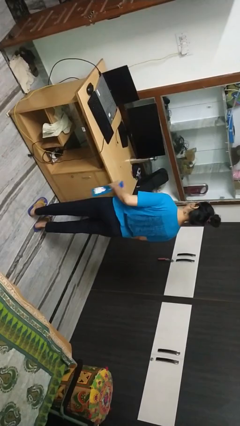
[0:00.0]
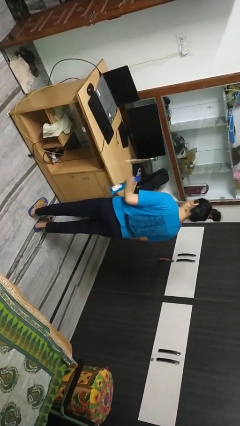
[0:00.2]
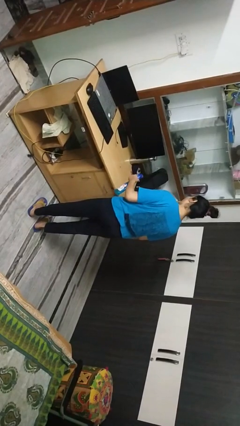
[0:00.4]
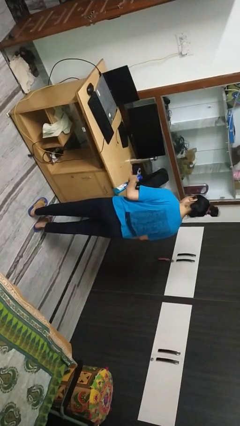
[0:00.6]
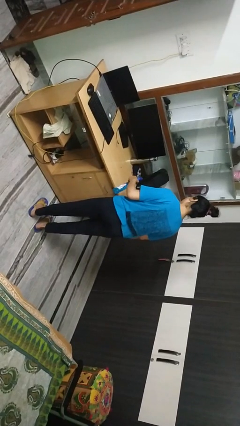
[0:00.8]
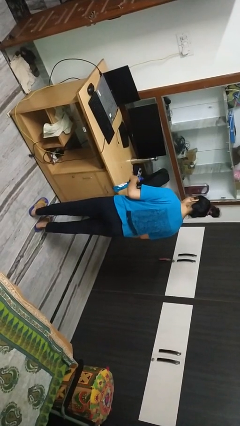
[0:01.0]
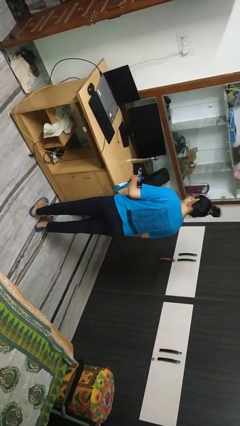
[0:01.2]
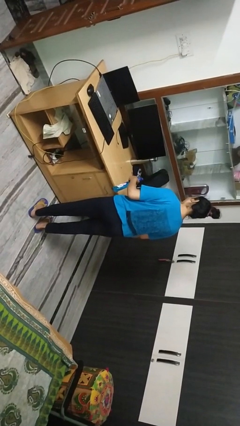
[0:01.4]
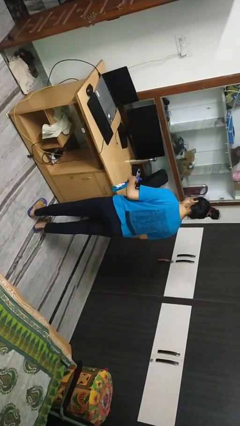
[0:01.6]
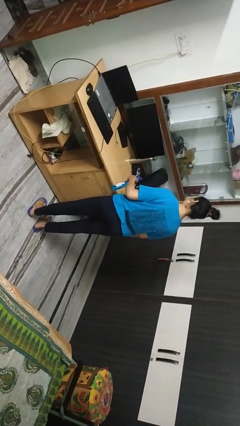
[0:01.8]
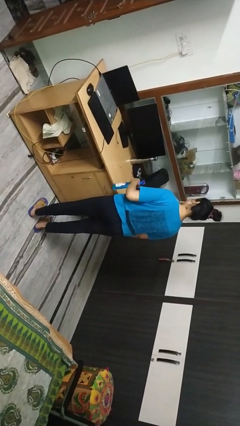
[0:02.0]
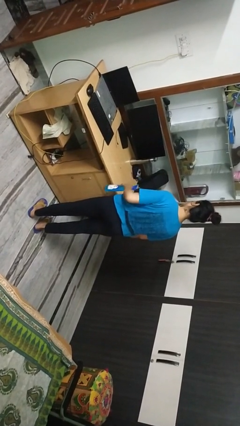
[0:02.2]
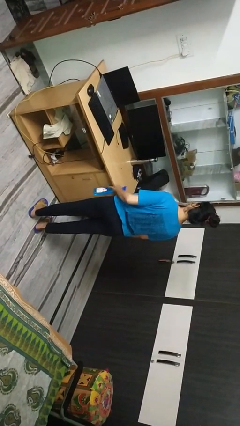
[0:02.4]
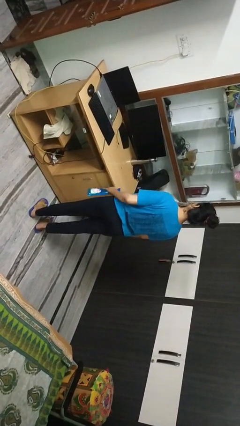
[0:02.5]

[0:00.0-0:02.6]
person sprays from bottle

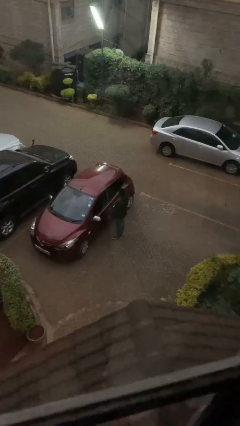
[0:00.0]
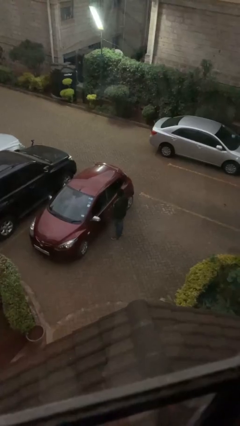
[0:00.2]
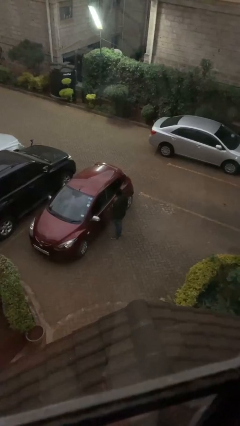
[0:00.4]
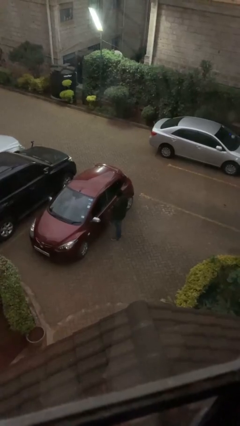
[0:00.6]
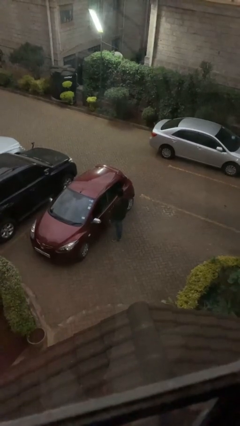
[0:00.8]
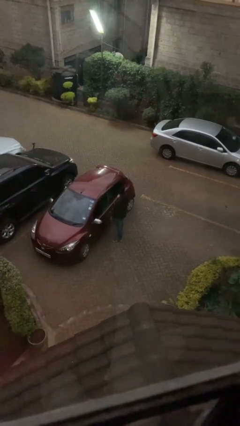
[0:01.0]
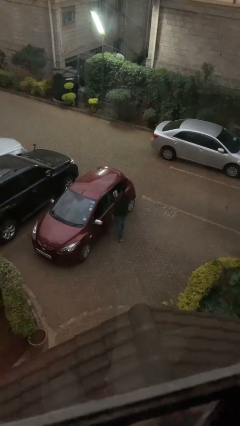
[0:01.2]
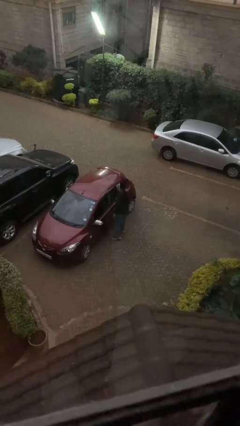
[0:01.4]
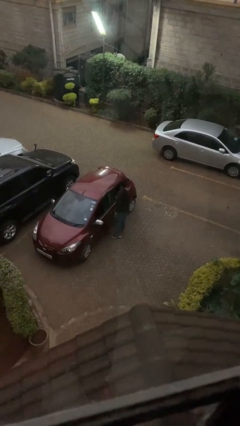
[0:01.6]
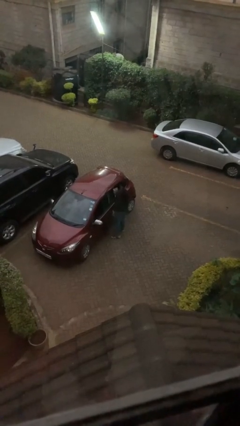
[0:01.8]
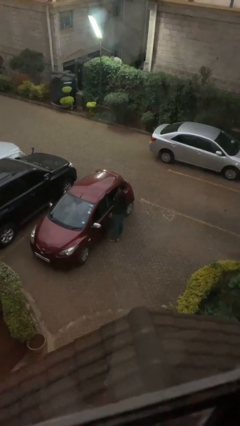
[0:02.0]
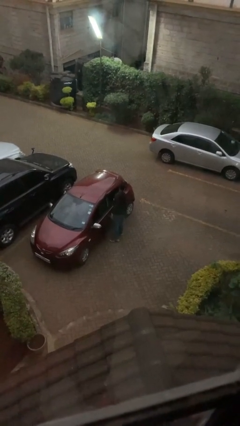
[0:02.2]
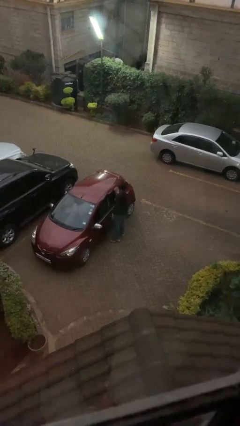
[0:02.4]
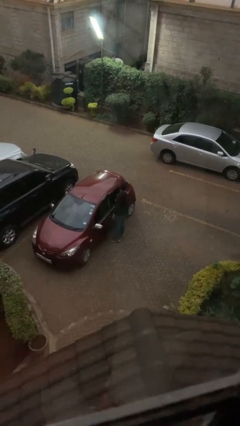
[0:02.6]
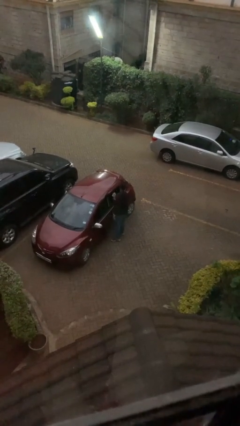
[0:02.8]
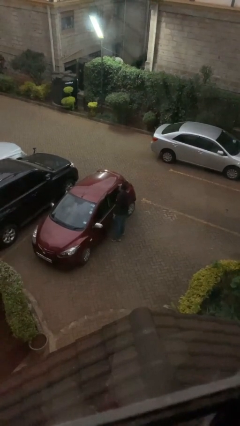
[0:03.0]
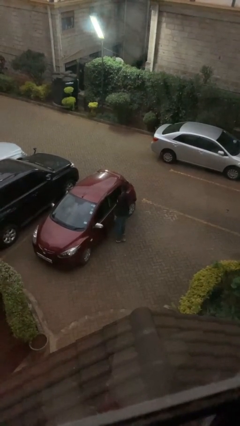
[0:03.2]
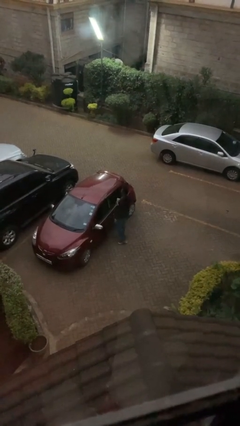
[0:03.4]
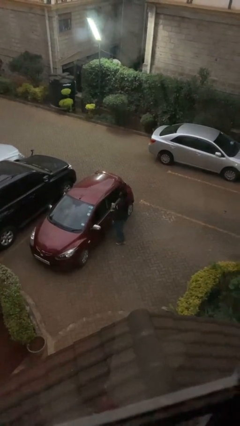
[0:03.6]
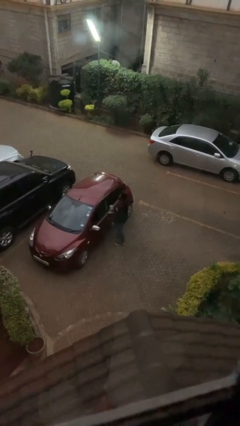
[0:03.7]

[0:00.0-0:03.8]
person polishes car with rag

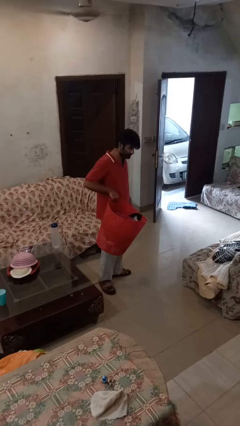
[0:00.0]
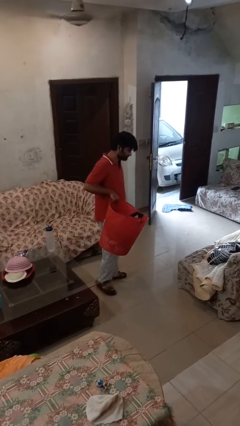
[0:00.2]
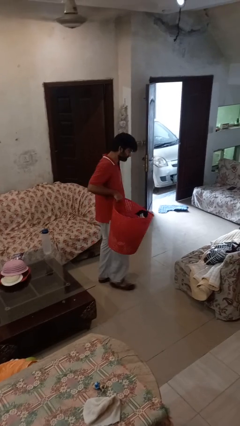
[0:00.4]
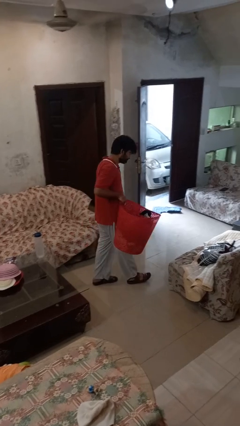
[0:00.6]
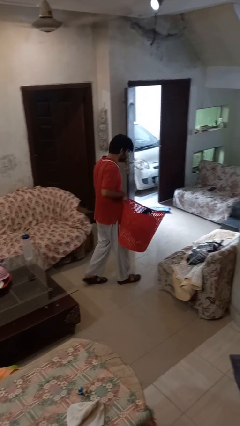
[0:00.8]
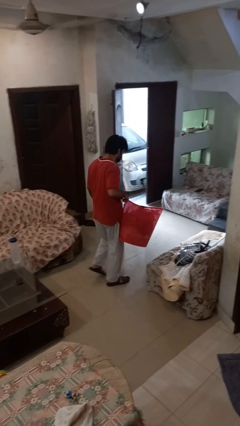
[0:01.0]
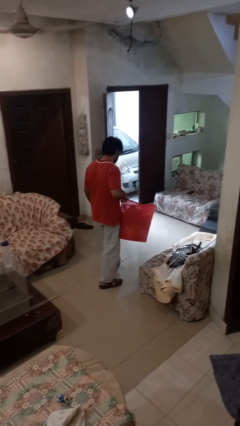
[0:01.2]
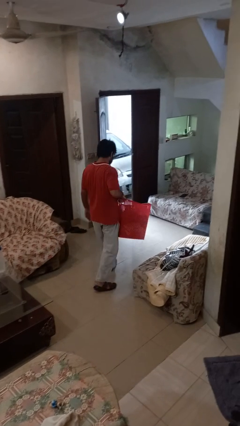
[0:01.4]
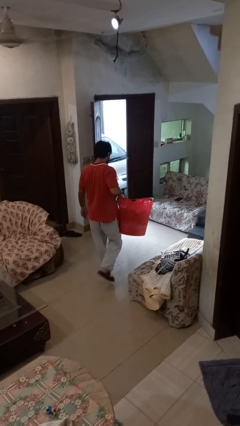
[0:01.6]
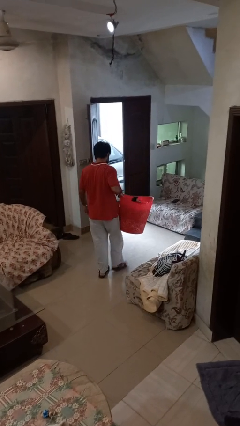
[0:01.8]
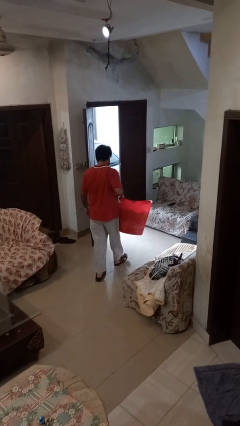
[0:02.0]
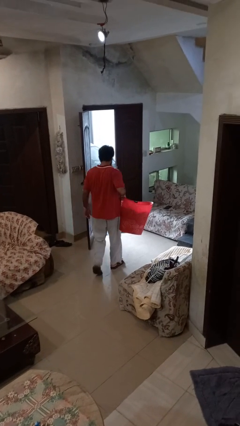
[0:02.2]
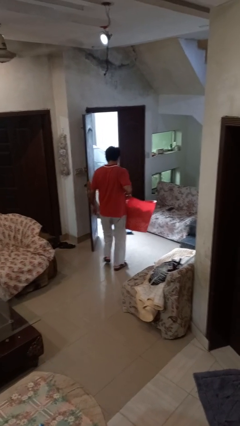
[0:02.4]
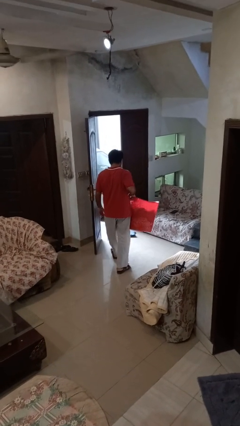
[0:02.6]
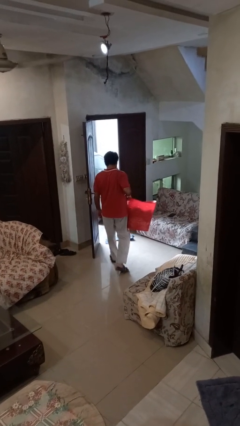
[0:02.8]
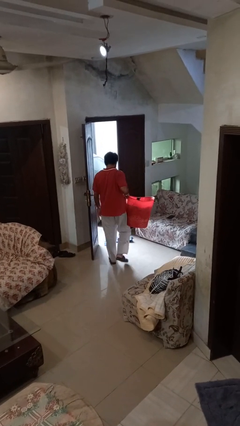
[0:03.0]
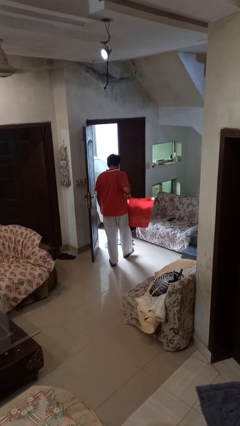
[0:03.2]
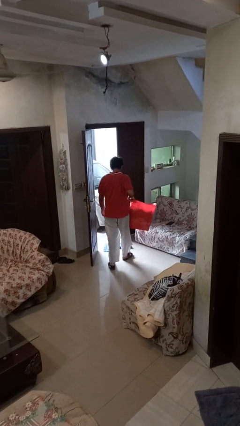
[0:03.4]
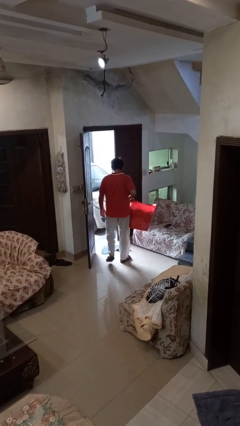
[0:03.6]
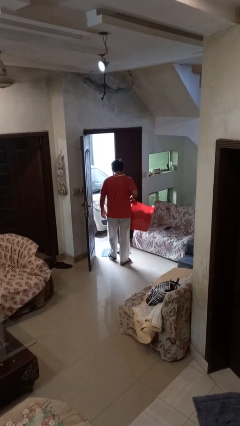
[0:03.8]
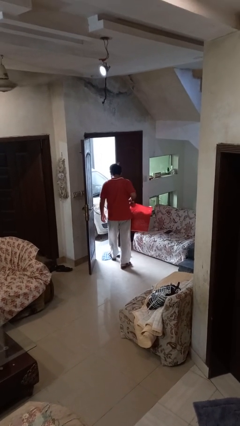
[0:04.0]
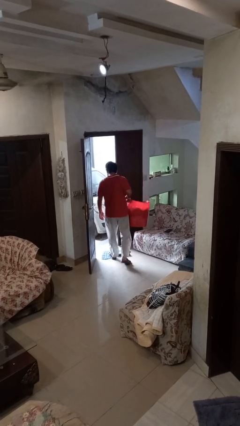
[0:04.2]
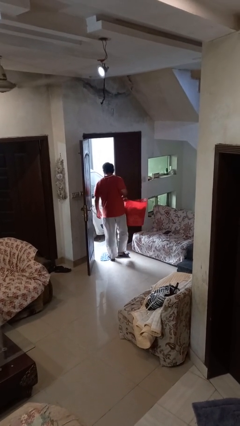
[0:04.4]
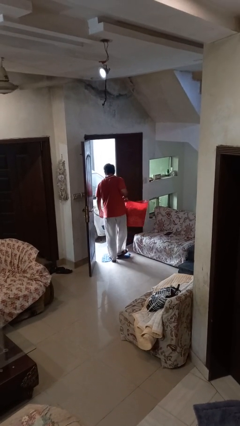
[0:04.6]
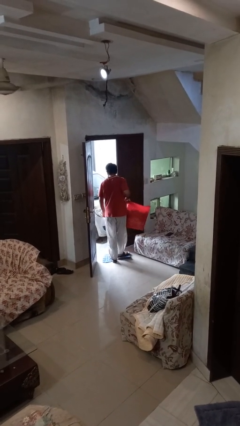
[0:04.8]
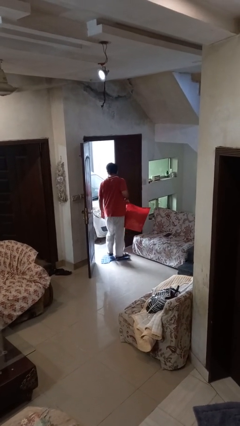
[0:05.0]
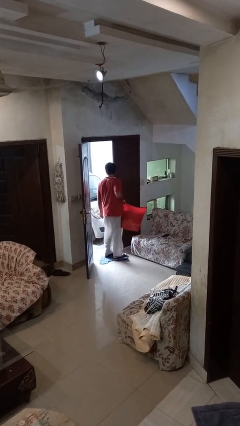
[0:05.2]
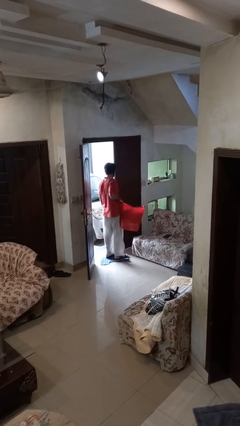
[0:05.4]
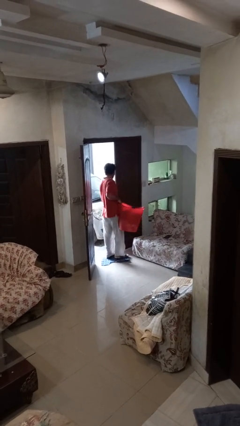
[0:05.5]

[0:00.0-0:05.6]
person carries laundry basket

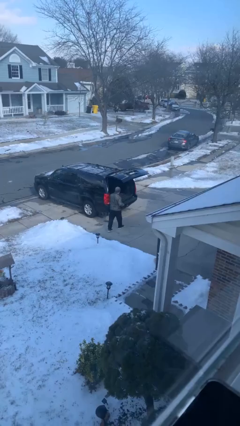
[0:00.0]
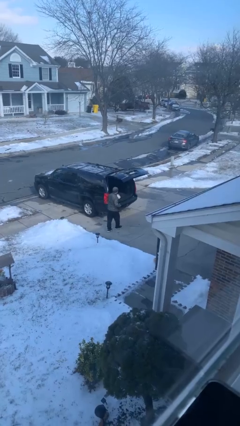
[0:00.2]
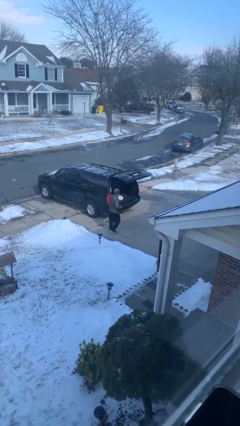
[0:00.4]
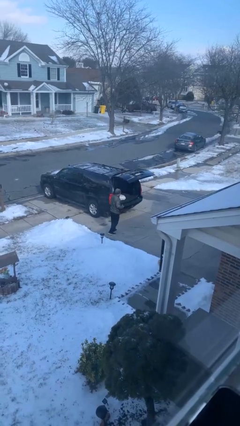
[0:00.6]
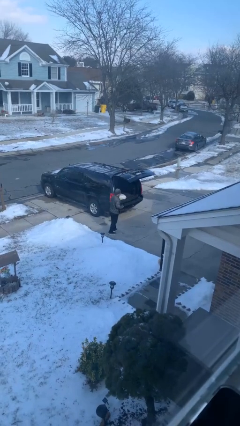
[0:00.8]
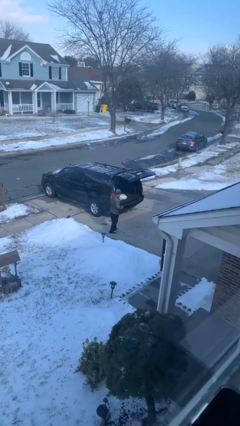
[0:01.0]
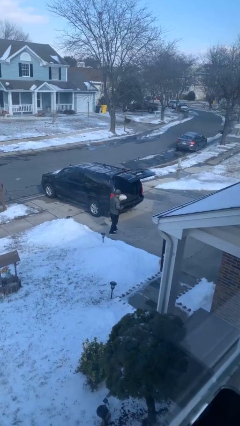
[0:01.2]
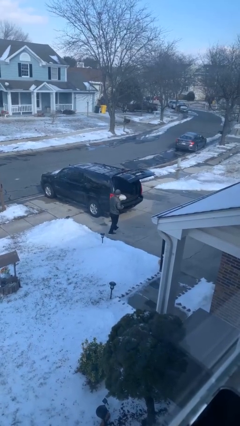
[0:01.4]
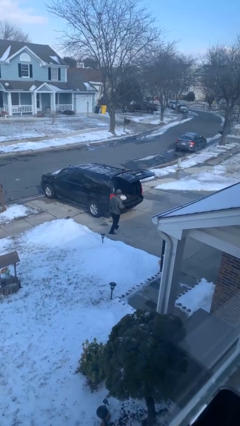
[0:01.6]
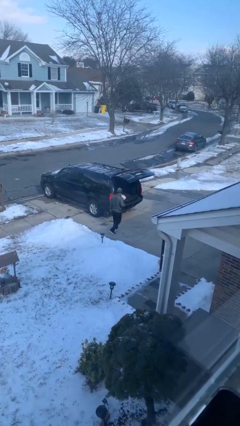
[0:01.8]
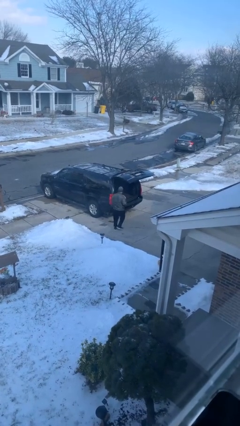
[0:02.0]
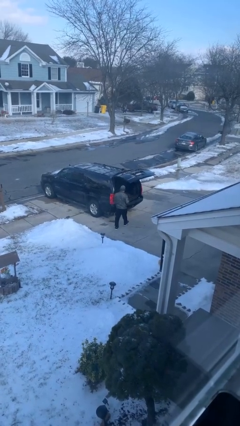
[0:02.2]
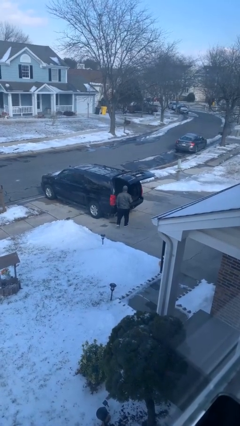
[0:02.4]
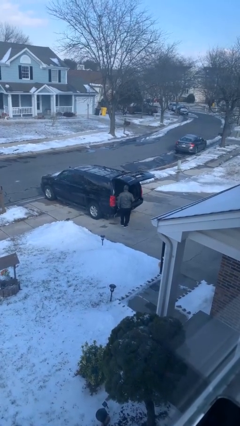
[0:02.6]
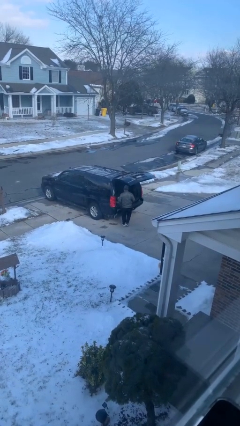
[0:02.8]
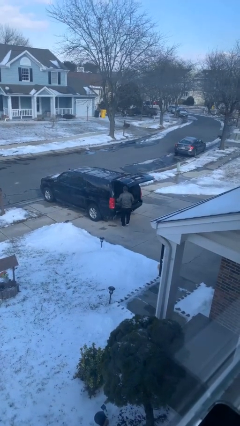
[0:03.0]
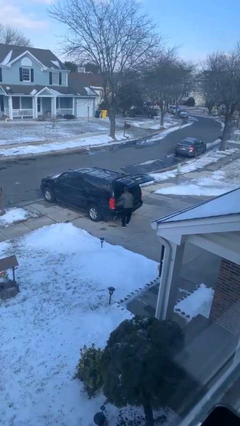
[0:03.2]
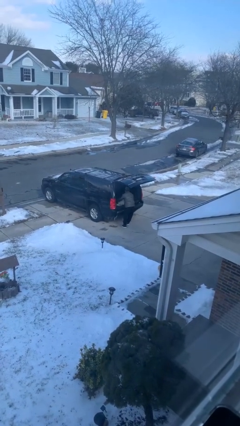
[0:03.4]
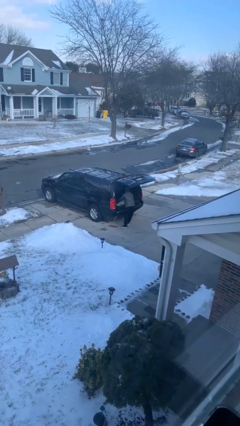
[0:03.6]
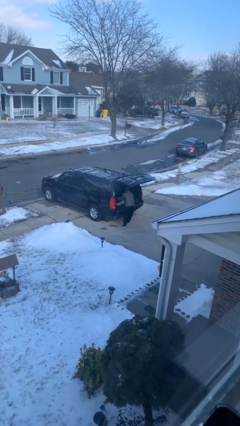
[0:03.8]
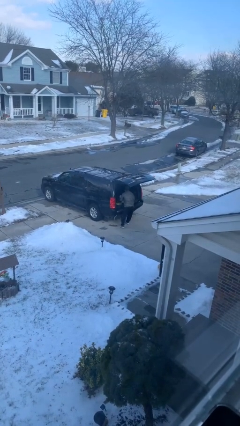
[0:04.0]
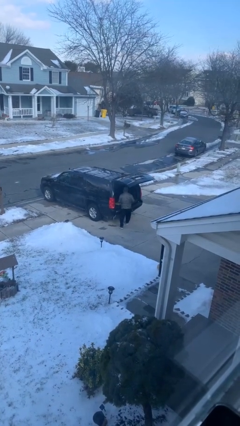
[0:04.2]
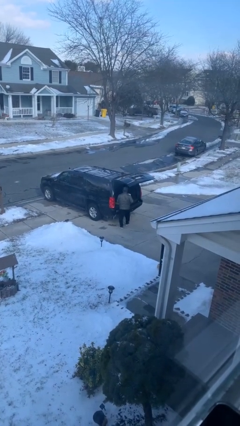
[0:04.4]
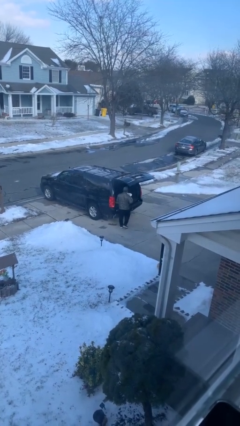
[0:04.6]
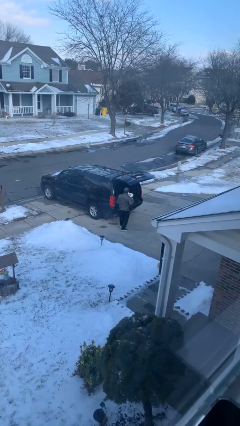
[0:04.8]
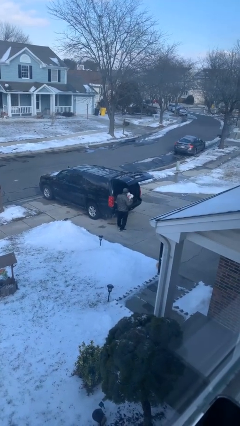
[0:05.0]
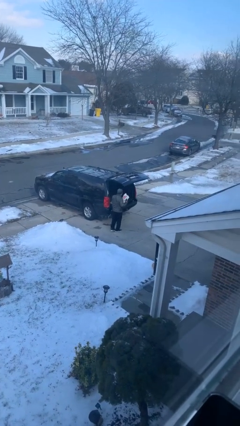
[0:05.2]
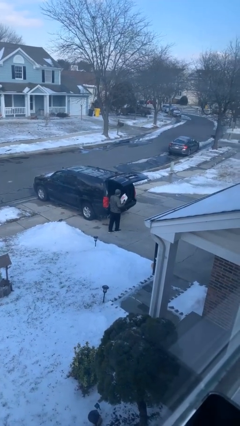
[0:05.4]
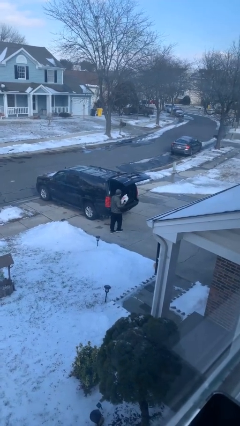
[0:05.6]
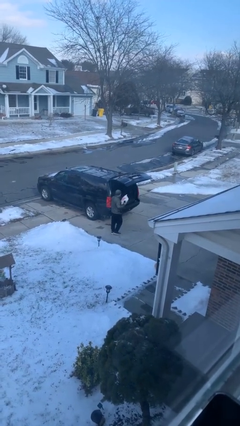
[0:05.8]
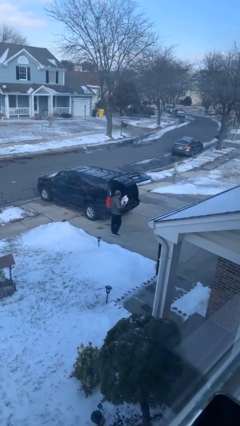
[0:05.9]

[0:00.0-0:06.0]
person unloads car
